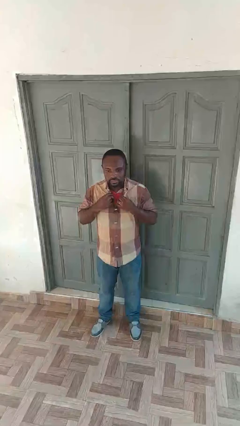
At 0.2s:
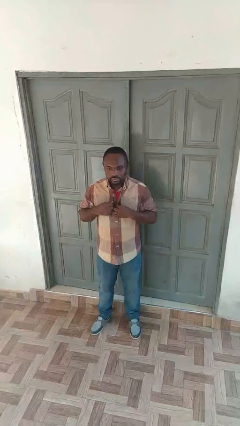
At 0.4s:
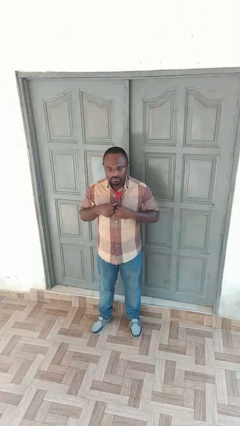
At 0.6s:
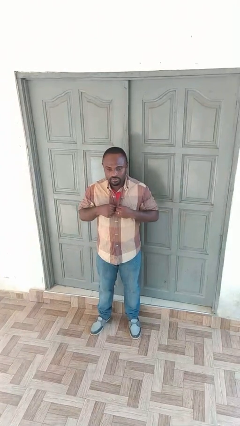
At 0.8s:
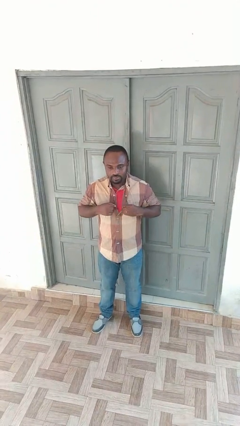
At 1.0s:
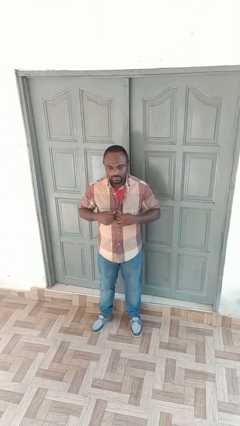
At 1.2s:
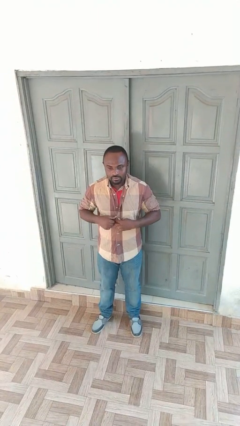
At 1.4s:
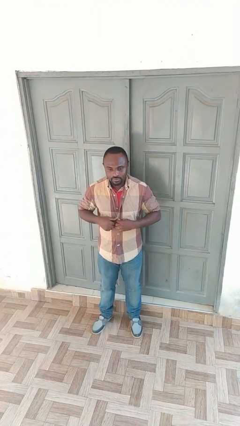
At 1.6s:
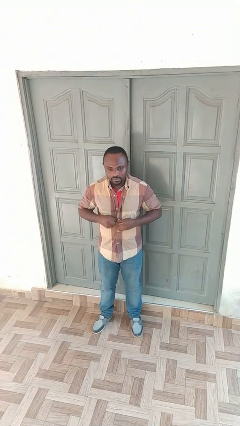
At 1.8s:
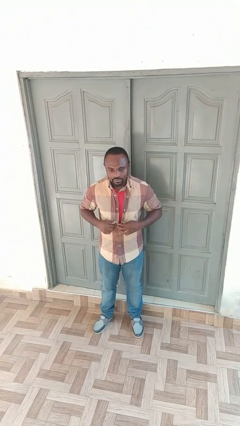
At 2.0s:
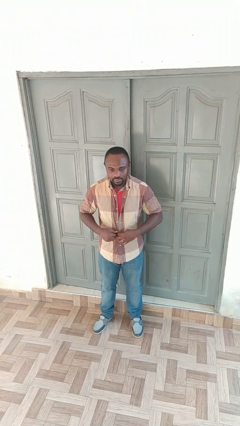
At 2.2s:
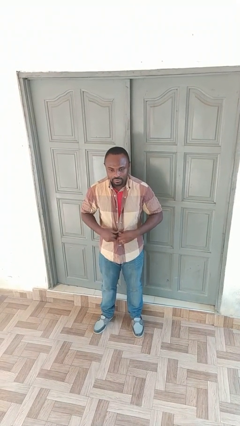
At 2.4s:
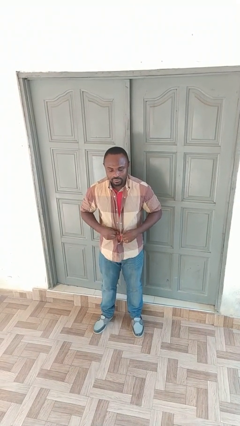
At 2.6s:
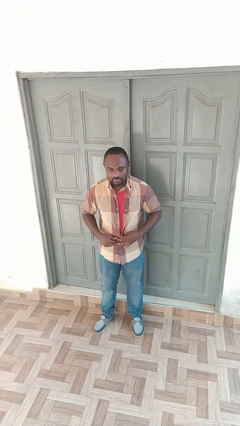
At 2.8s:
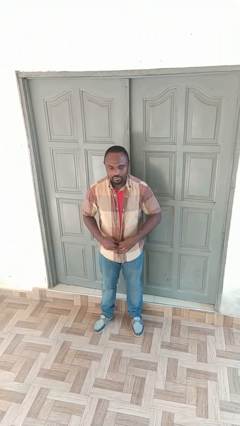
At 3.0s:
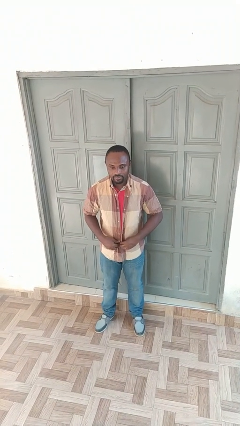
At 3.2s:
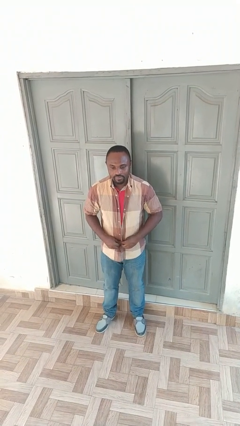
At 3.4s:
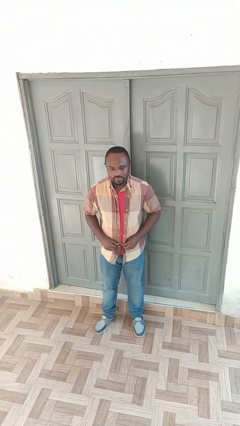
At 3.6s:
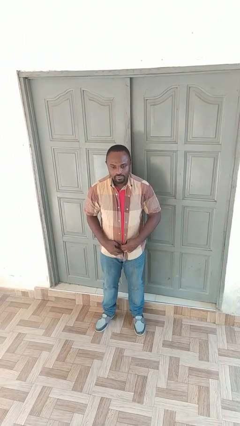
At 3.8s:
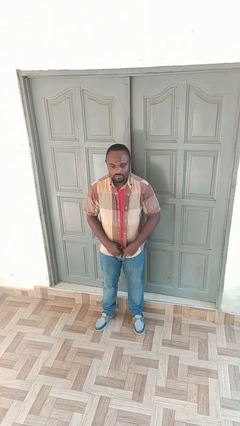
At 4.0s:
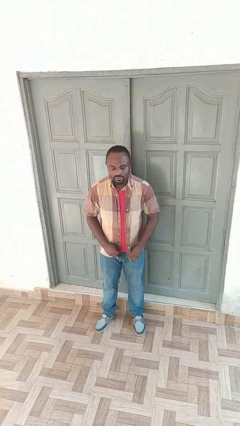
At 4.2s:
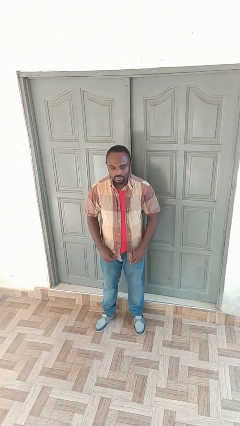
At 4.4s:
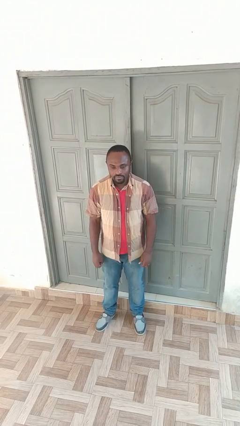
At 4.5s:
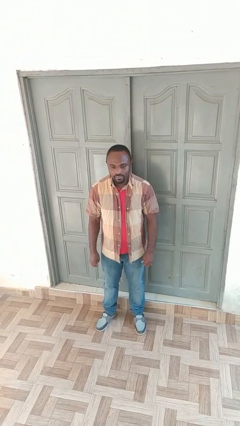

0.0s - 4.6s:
person unbuttons shirt

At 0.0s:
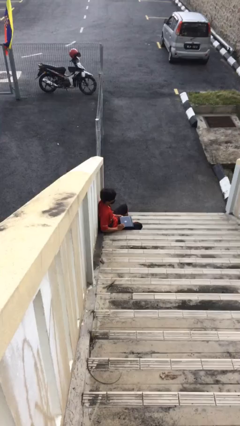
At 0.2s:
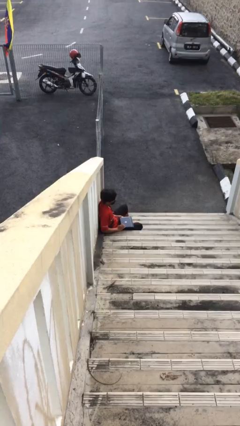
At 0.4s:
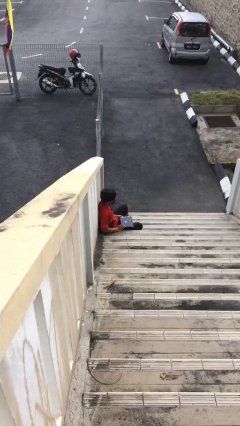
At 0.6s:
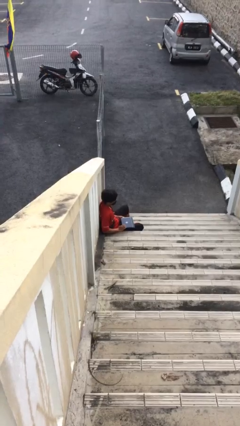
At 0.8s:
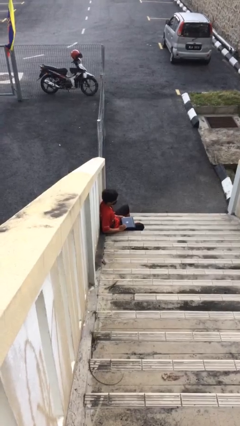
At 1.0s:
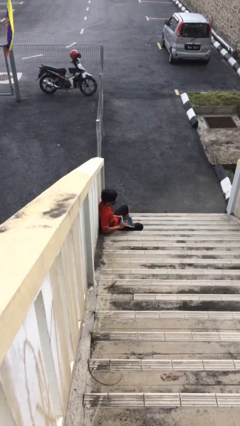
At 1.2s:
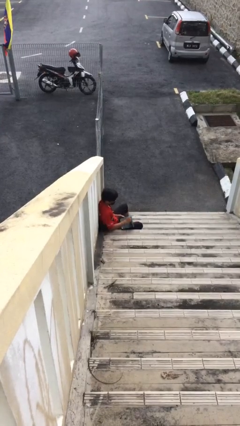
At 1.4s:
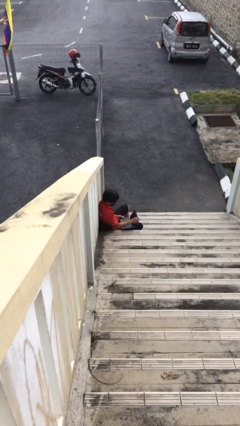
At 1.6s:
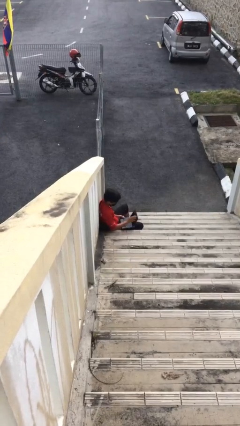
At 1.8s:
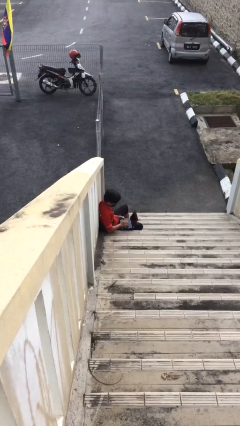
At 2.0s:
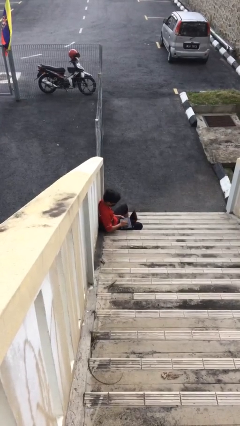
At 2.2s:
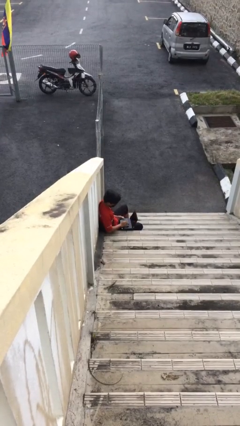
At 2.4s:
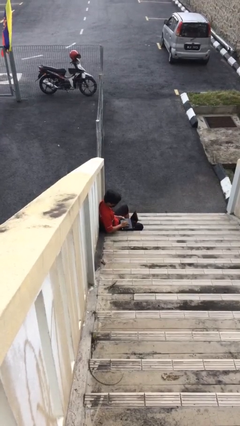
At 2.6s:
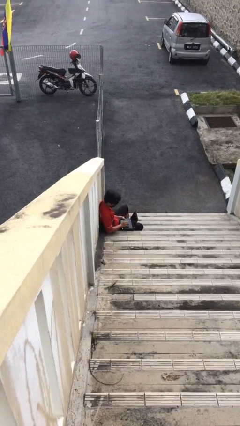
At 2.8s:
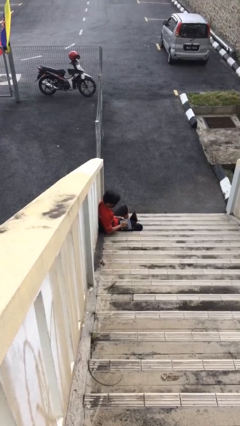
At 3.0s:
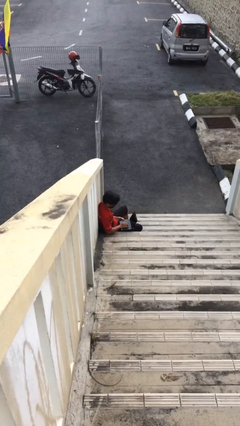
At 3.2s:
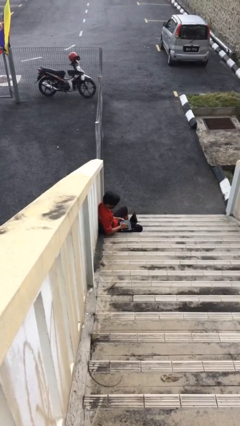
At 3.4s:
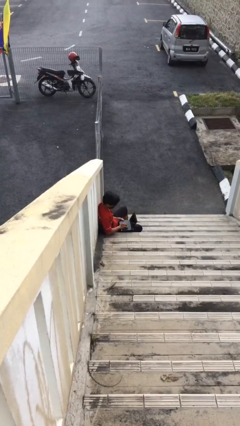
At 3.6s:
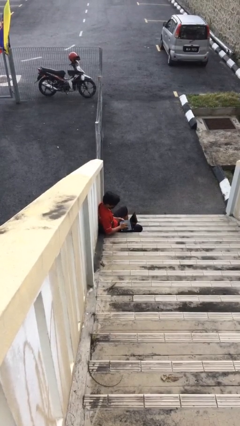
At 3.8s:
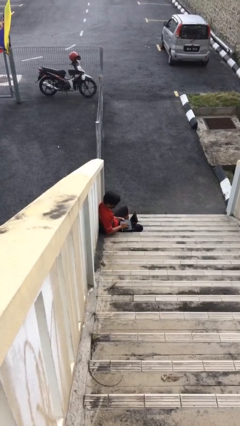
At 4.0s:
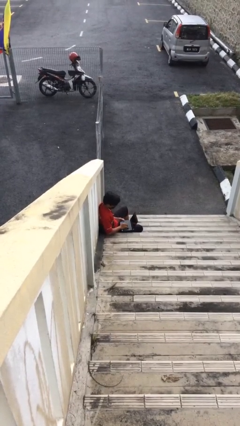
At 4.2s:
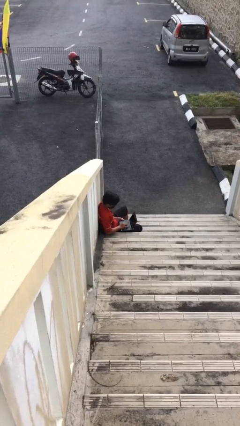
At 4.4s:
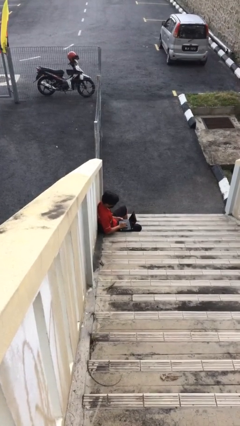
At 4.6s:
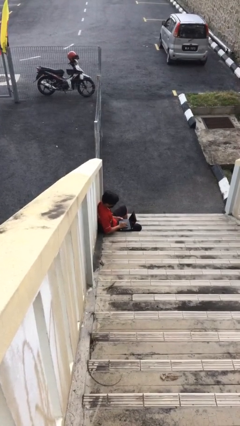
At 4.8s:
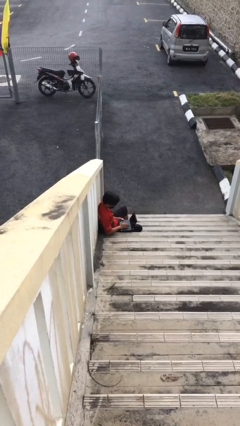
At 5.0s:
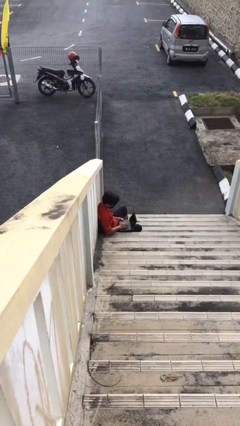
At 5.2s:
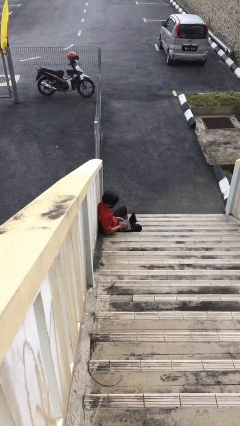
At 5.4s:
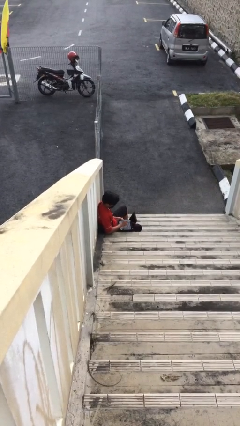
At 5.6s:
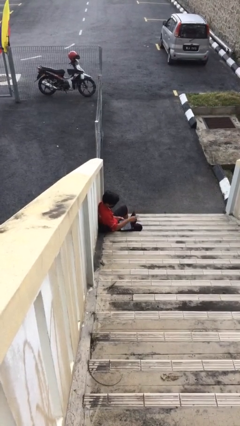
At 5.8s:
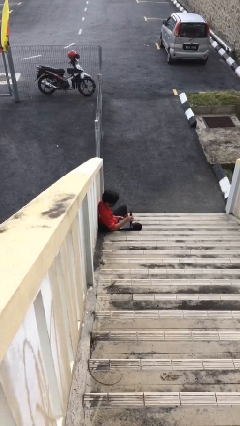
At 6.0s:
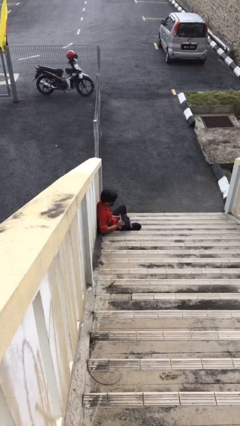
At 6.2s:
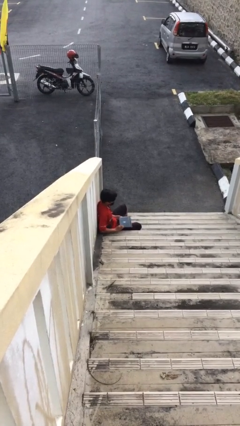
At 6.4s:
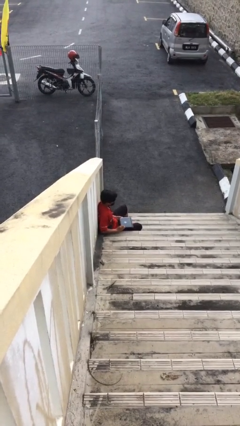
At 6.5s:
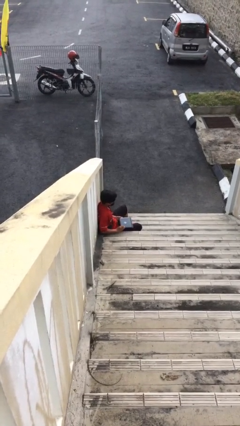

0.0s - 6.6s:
person interacts with laptop

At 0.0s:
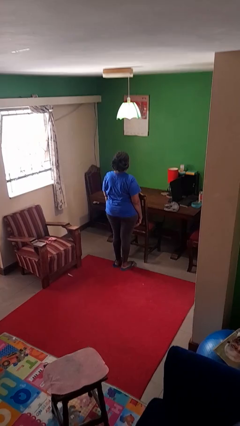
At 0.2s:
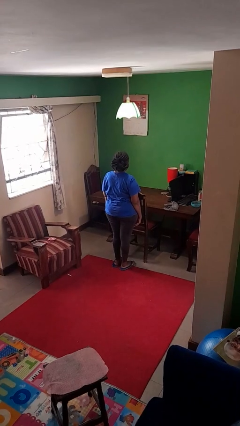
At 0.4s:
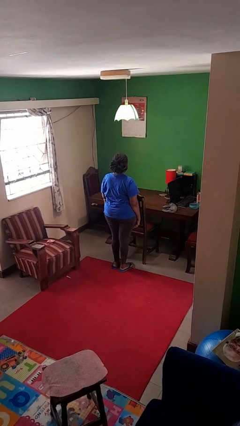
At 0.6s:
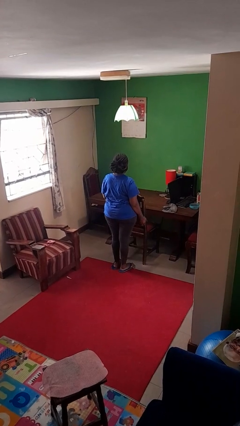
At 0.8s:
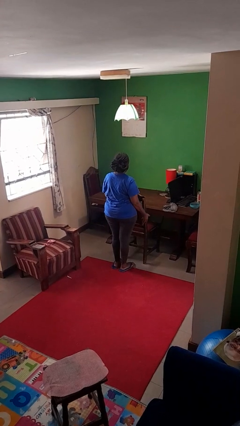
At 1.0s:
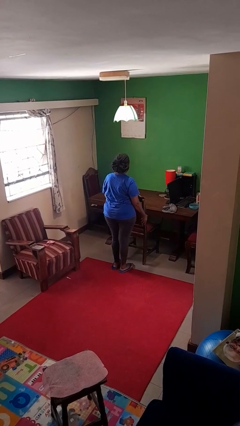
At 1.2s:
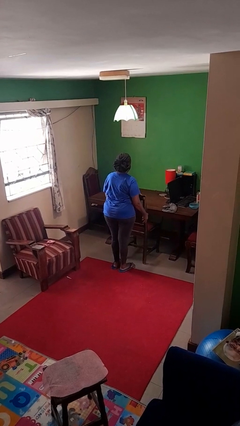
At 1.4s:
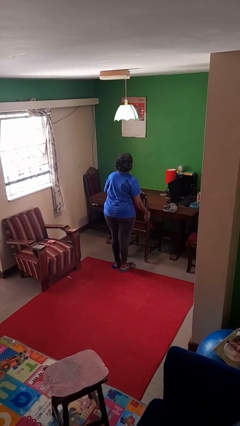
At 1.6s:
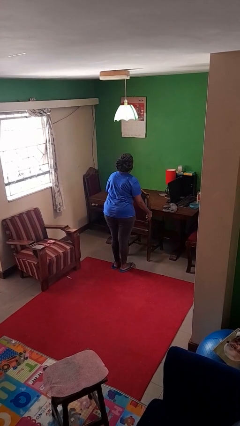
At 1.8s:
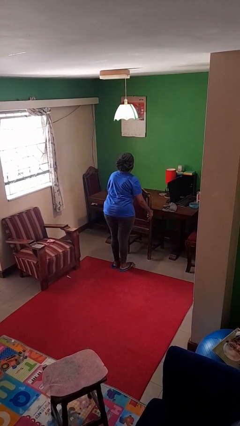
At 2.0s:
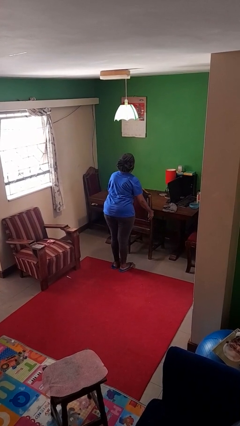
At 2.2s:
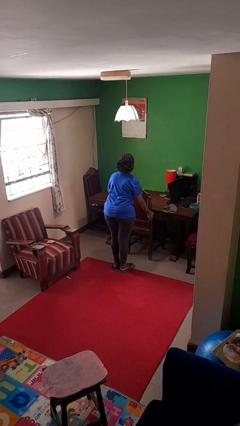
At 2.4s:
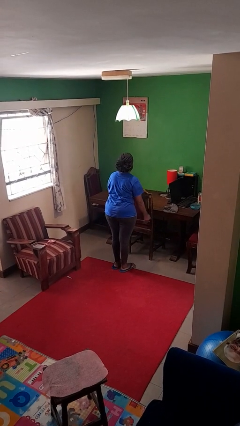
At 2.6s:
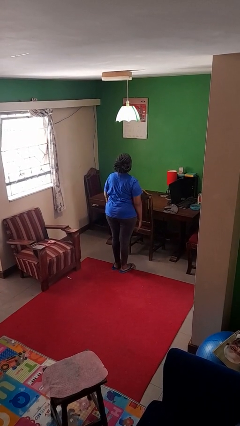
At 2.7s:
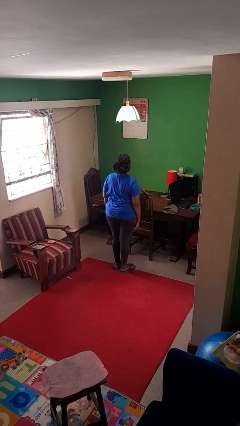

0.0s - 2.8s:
person pushes in chair

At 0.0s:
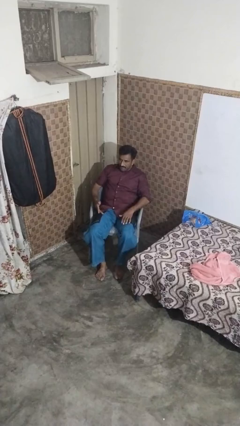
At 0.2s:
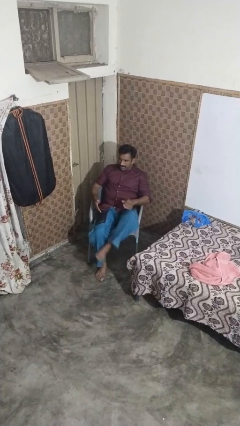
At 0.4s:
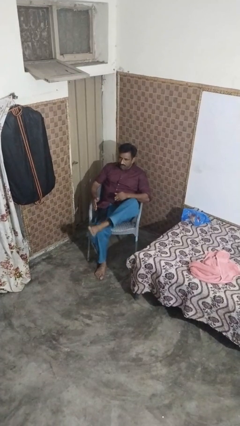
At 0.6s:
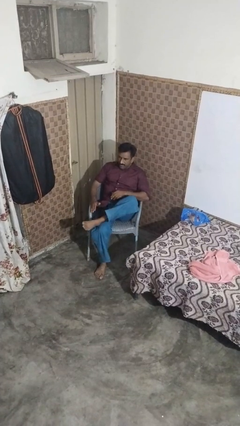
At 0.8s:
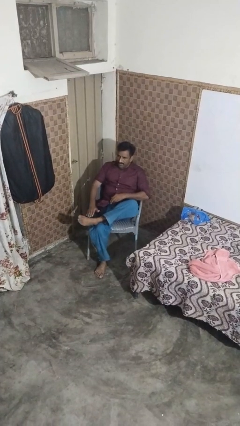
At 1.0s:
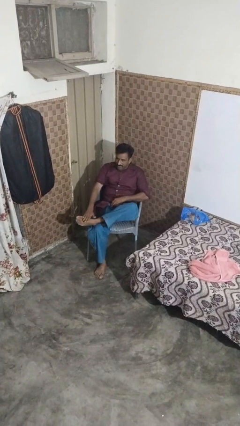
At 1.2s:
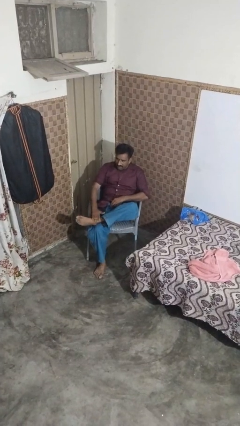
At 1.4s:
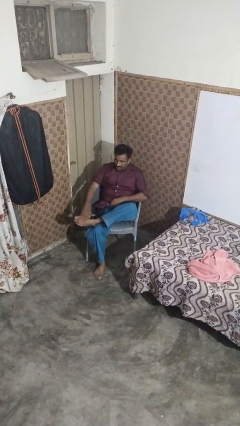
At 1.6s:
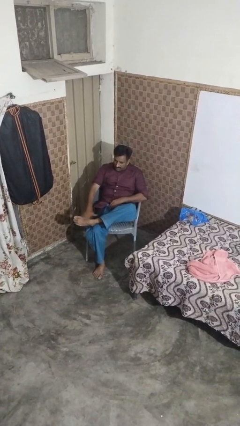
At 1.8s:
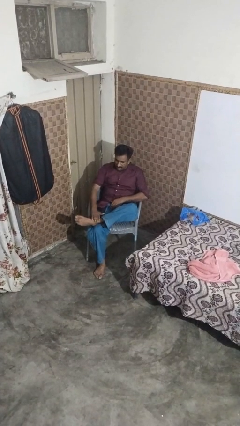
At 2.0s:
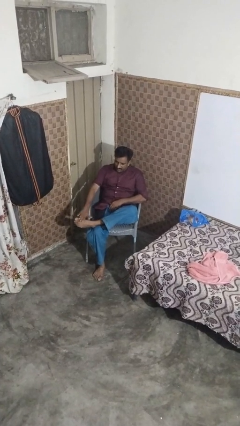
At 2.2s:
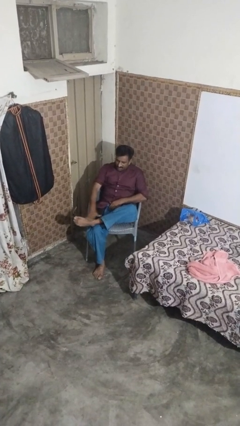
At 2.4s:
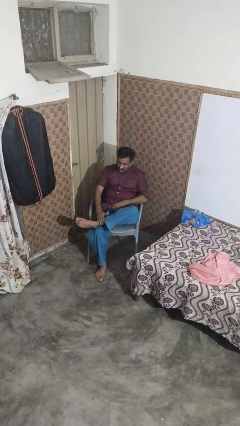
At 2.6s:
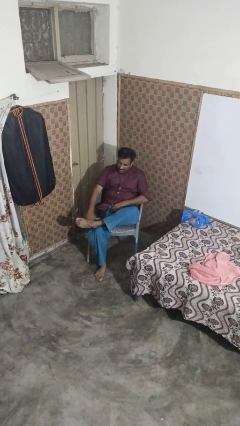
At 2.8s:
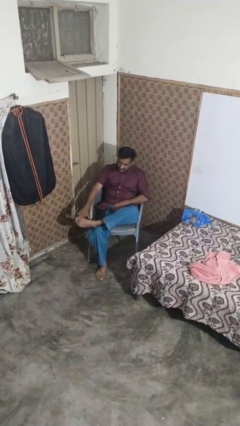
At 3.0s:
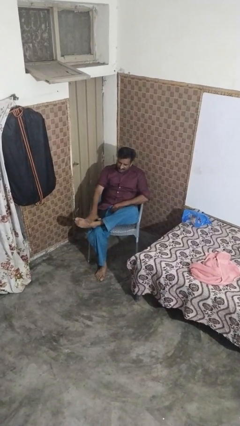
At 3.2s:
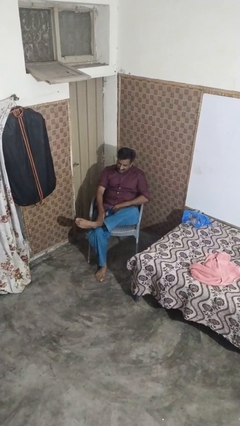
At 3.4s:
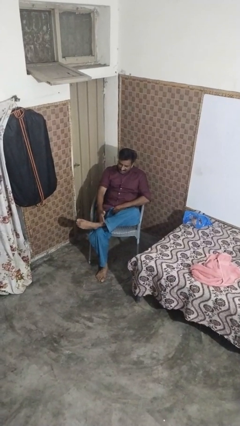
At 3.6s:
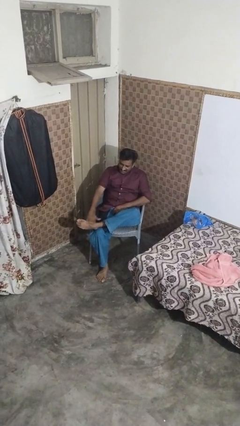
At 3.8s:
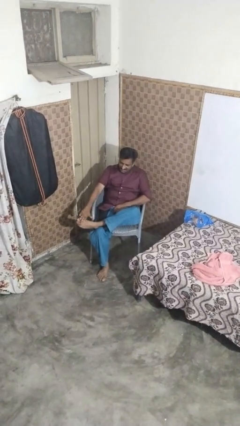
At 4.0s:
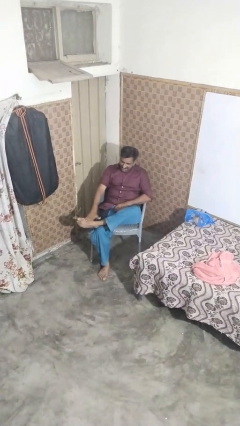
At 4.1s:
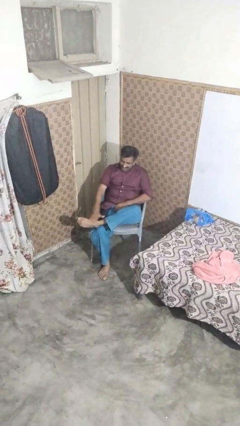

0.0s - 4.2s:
person rubs foot
